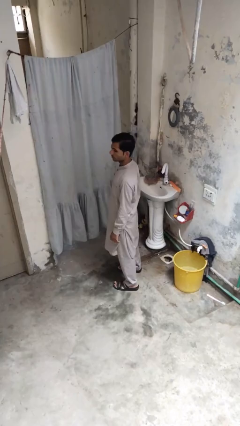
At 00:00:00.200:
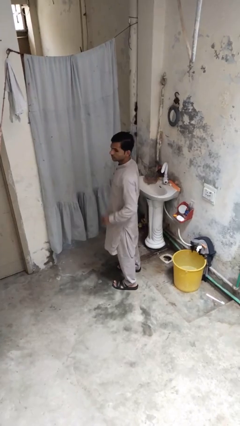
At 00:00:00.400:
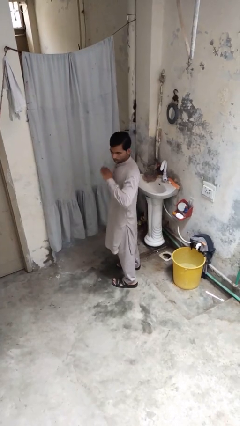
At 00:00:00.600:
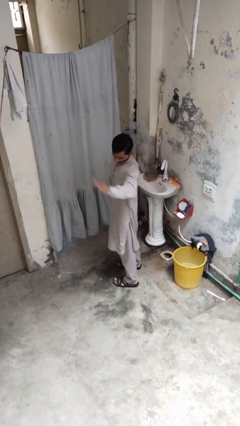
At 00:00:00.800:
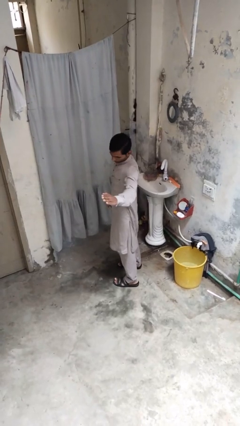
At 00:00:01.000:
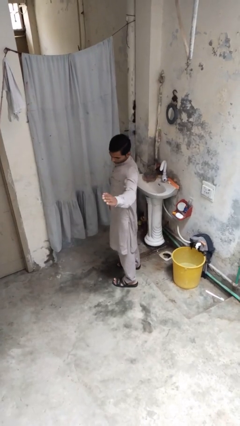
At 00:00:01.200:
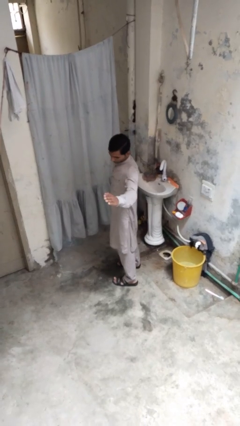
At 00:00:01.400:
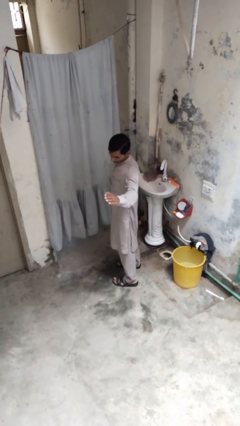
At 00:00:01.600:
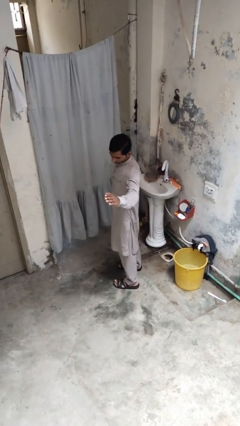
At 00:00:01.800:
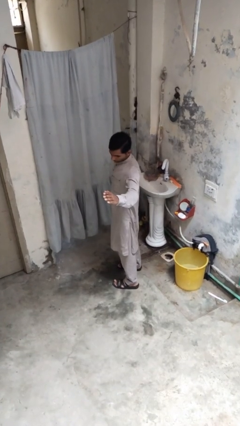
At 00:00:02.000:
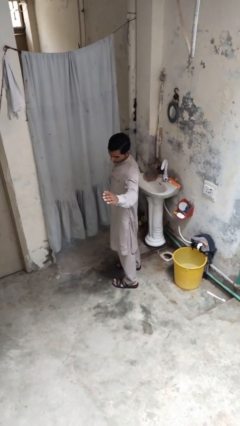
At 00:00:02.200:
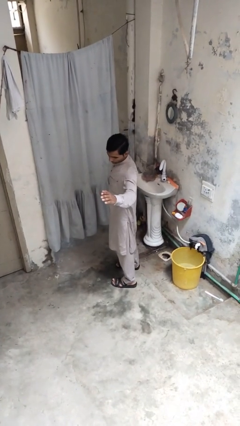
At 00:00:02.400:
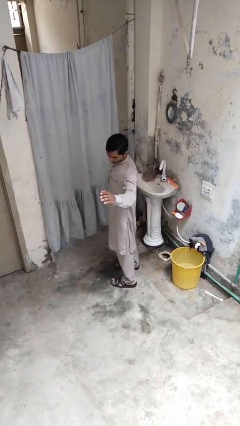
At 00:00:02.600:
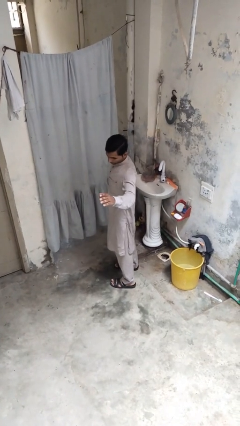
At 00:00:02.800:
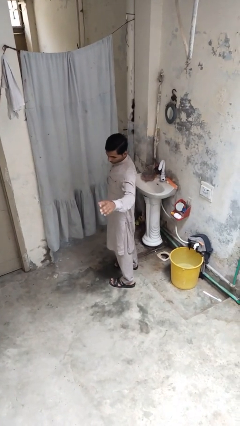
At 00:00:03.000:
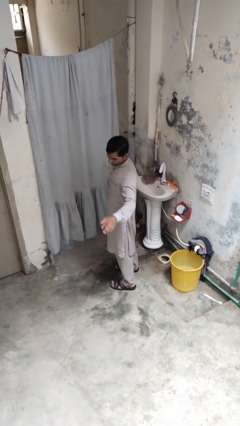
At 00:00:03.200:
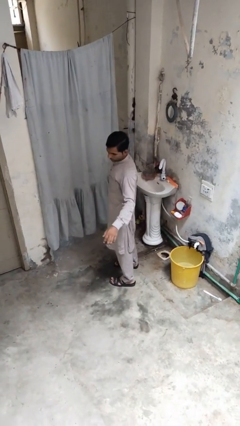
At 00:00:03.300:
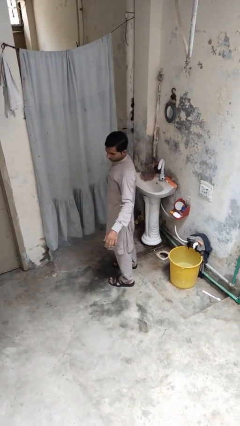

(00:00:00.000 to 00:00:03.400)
person karate chop

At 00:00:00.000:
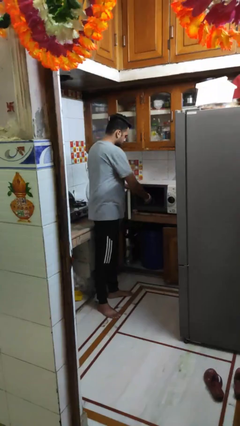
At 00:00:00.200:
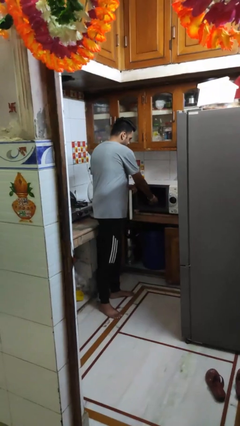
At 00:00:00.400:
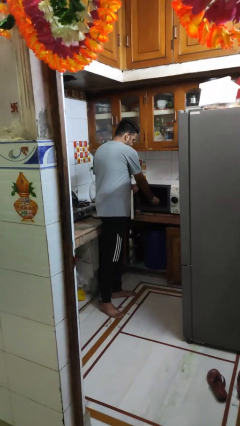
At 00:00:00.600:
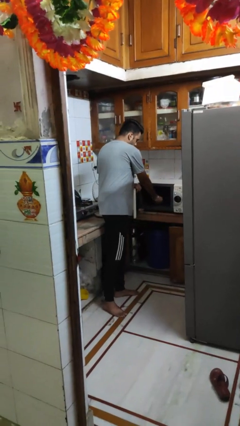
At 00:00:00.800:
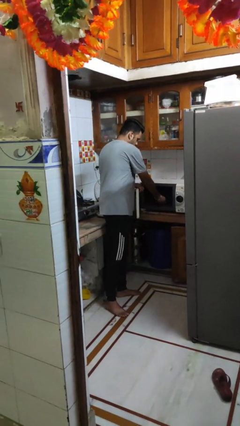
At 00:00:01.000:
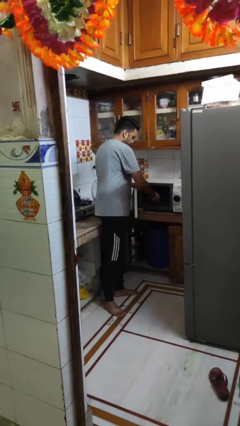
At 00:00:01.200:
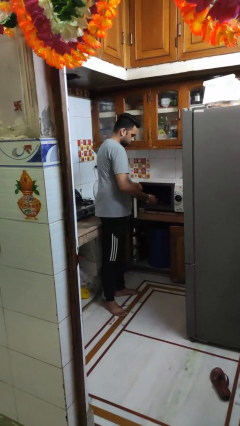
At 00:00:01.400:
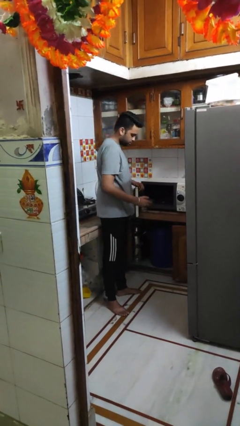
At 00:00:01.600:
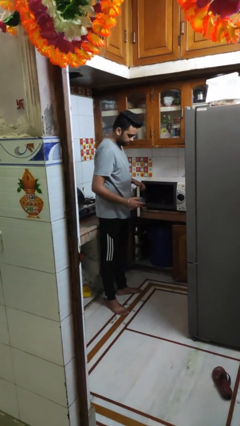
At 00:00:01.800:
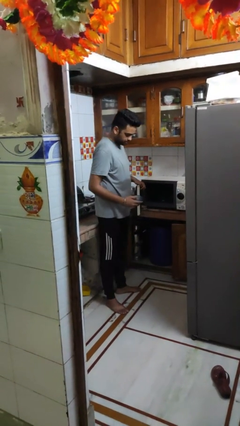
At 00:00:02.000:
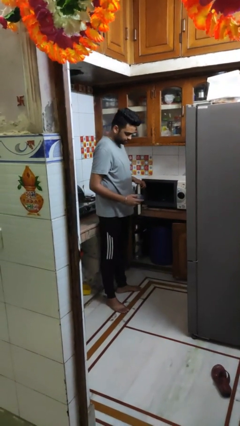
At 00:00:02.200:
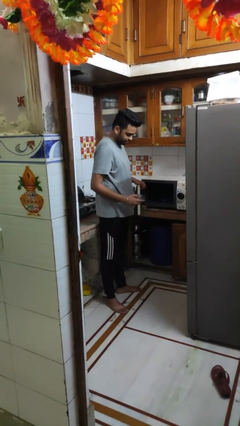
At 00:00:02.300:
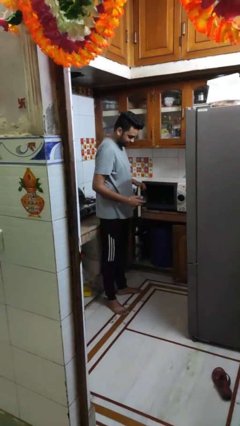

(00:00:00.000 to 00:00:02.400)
person takes object from microwave
